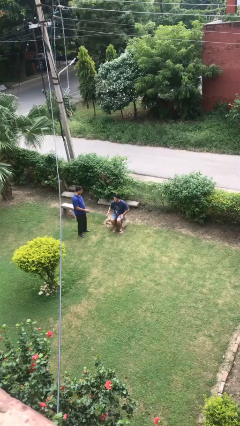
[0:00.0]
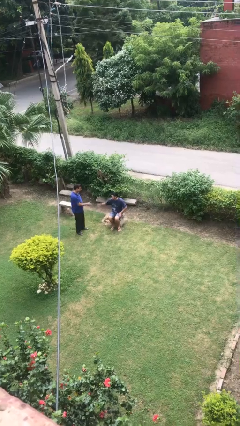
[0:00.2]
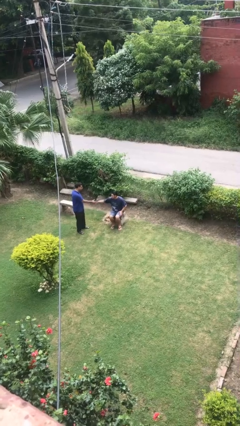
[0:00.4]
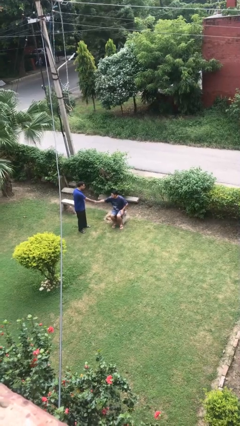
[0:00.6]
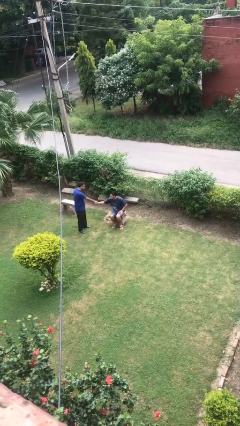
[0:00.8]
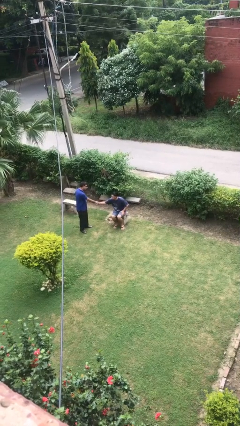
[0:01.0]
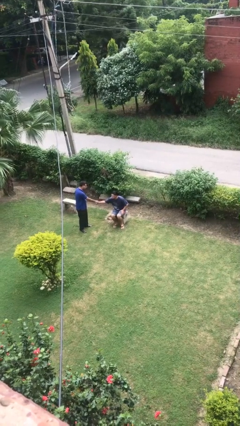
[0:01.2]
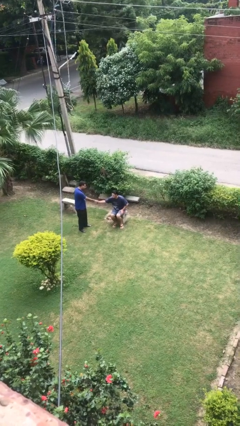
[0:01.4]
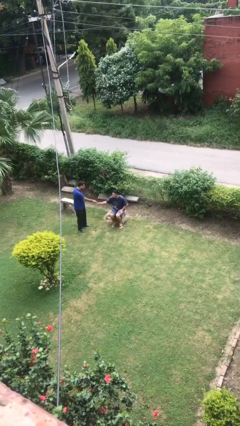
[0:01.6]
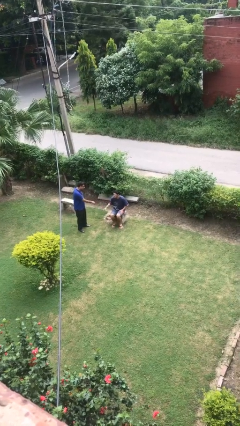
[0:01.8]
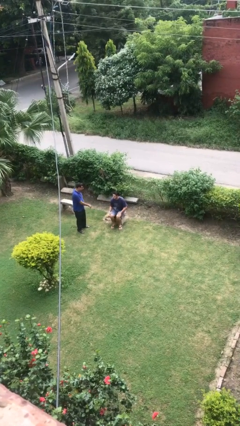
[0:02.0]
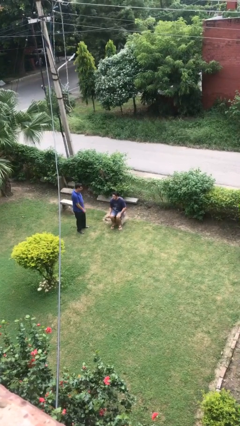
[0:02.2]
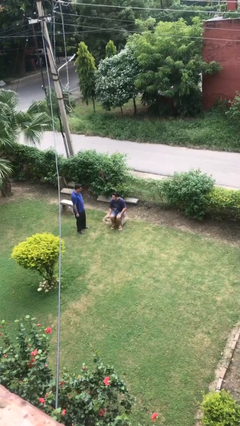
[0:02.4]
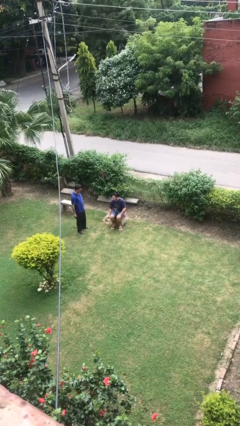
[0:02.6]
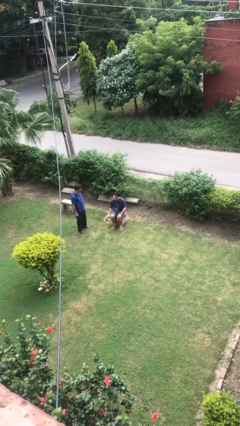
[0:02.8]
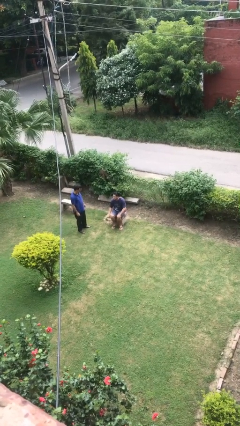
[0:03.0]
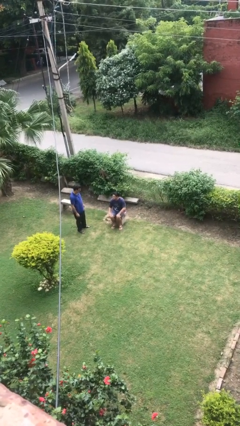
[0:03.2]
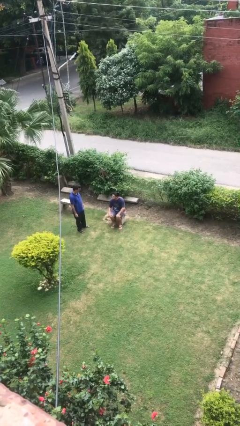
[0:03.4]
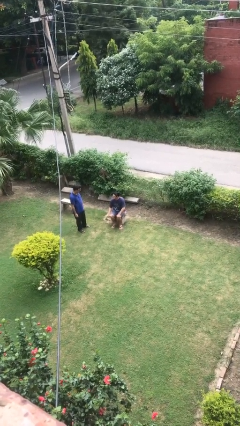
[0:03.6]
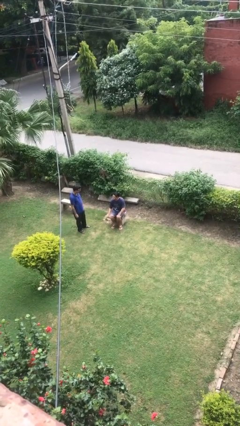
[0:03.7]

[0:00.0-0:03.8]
person shakes hand

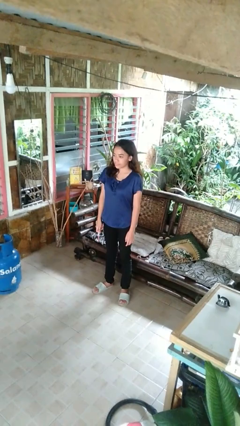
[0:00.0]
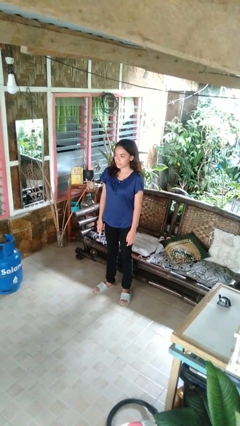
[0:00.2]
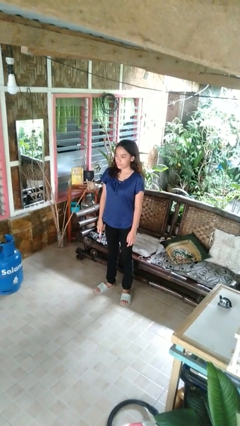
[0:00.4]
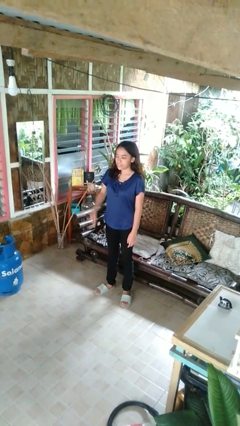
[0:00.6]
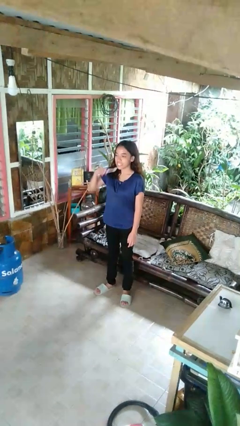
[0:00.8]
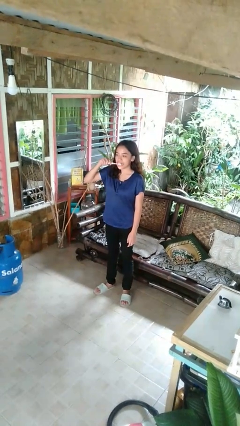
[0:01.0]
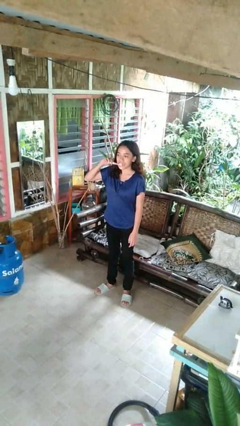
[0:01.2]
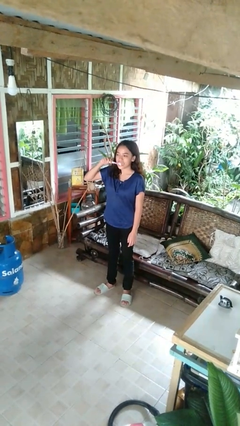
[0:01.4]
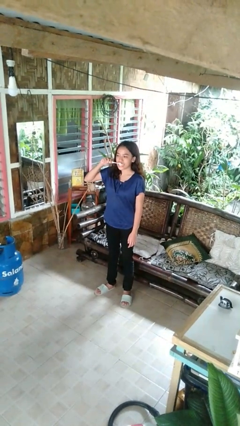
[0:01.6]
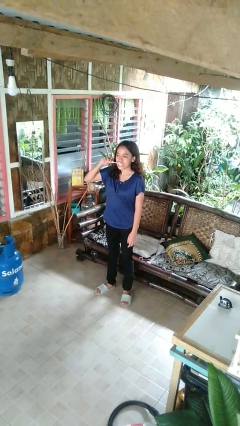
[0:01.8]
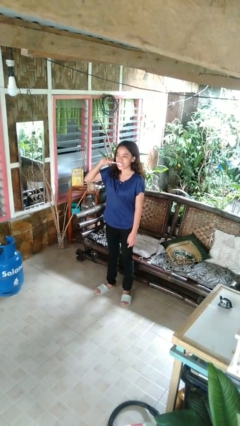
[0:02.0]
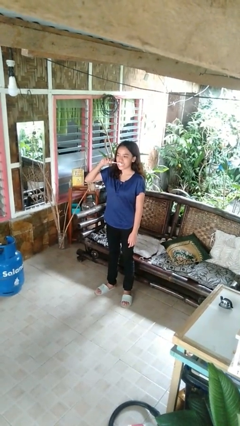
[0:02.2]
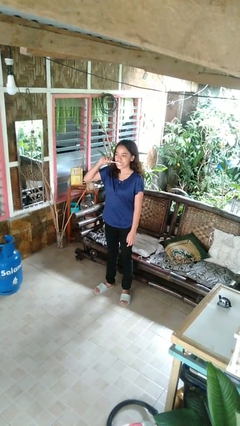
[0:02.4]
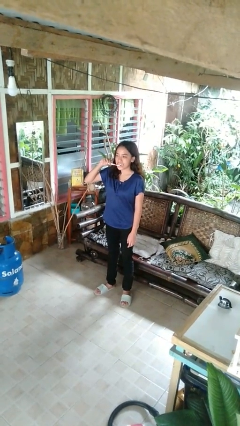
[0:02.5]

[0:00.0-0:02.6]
person brushes teeth

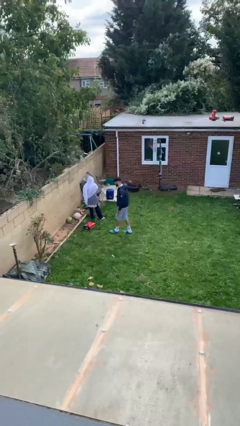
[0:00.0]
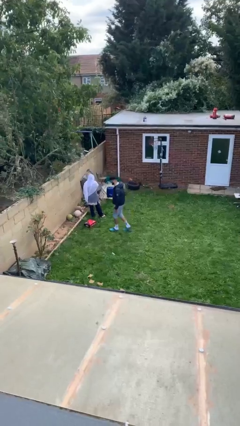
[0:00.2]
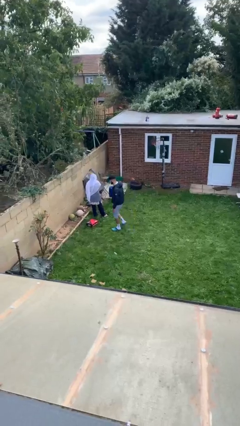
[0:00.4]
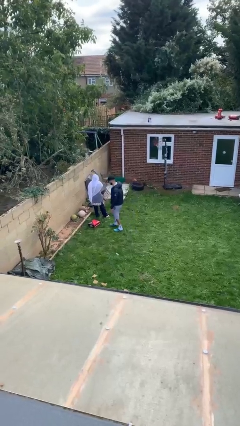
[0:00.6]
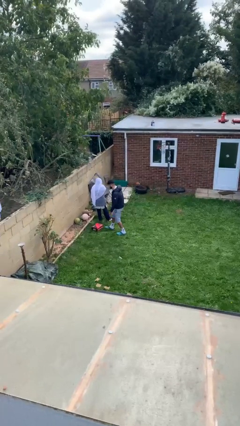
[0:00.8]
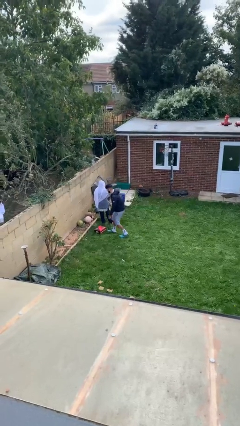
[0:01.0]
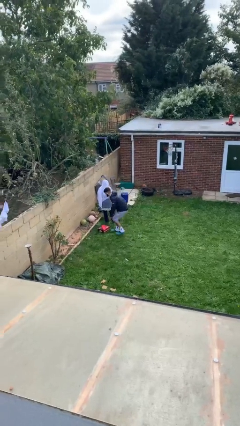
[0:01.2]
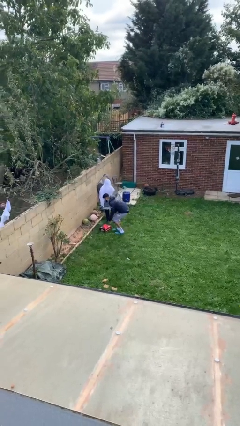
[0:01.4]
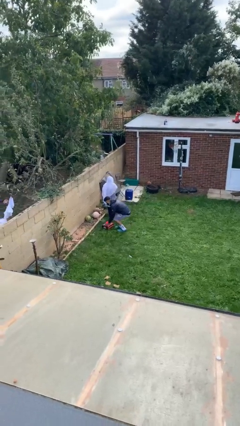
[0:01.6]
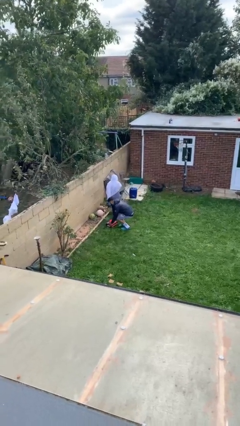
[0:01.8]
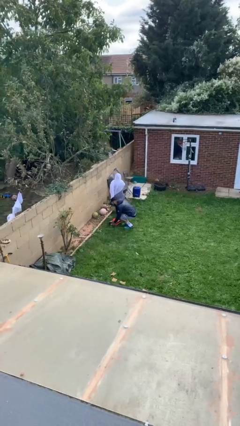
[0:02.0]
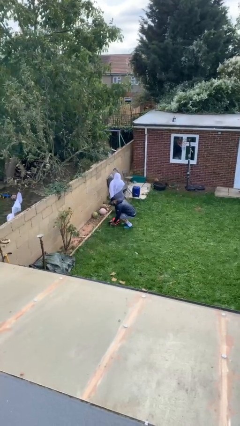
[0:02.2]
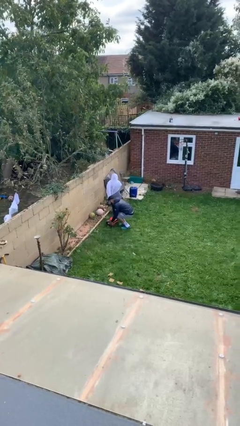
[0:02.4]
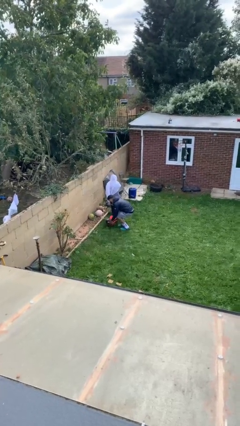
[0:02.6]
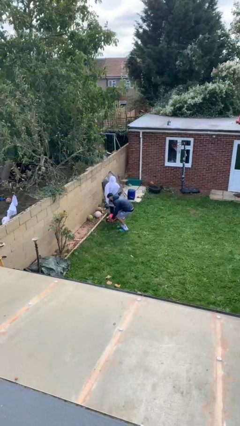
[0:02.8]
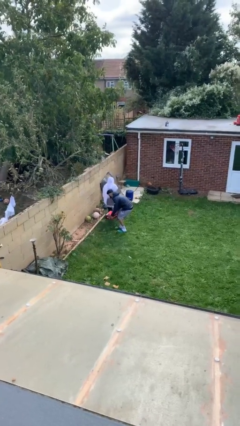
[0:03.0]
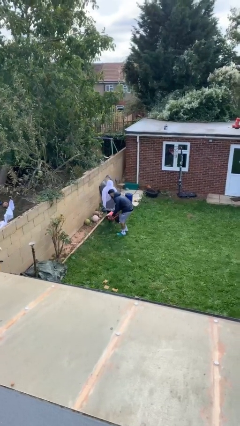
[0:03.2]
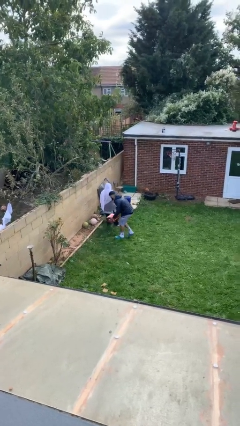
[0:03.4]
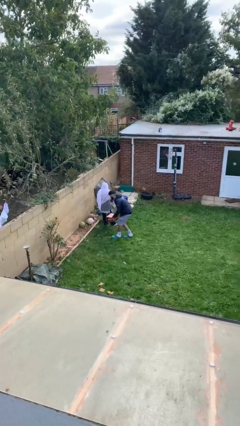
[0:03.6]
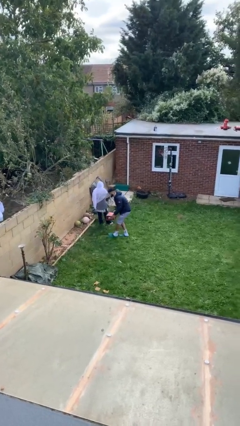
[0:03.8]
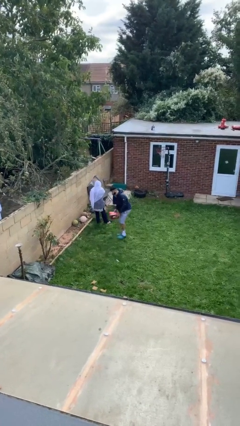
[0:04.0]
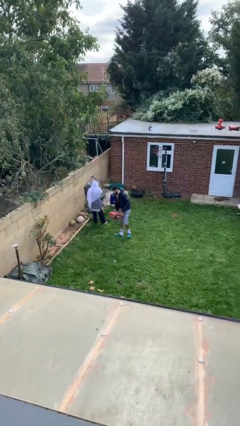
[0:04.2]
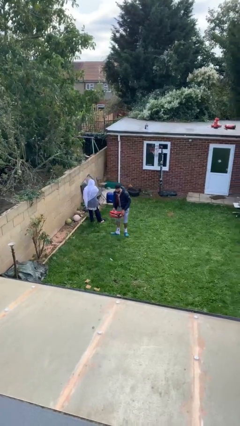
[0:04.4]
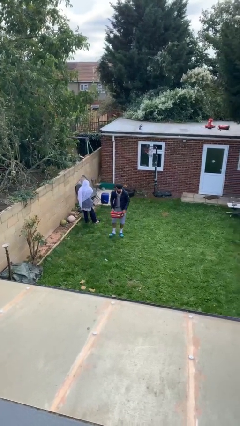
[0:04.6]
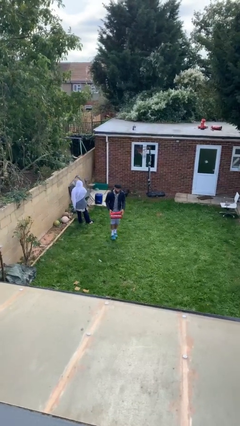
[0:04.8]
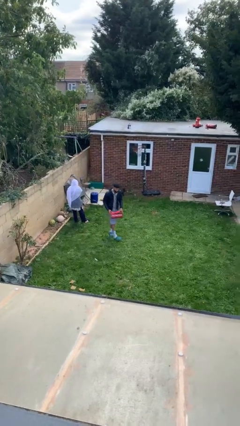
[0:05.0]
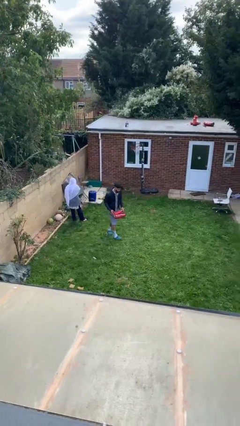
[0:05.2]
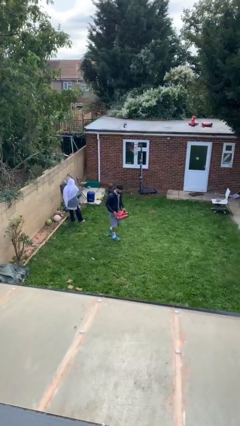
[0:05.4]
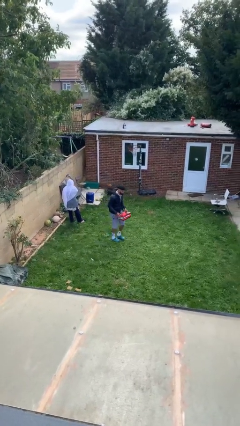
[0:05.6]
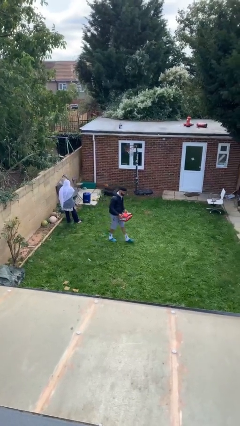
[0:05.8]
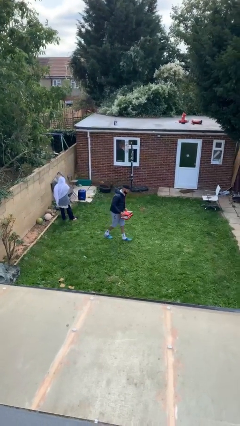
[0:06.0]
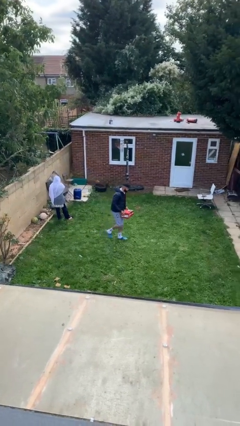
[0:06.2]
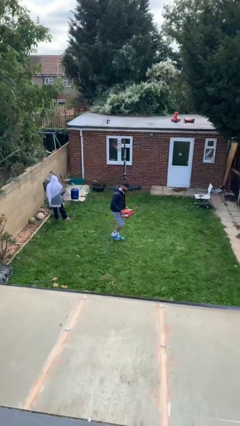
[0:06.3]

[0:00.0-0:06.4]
person steals object from person

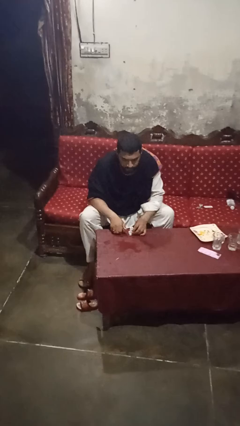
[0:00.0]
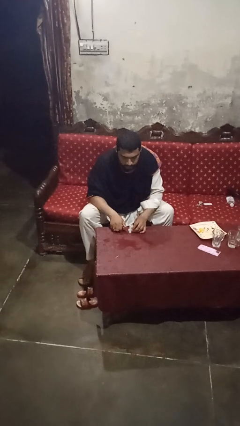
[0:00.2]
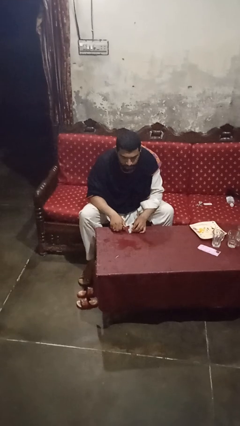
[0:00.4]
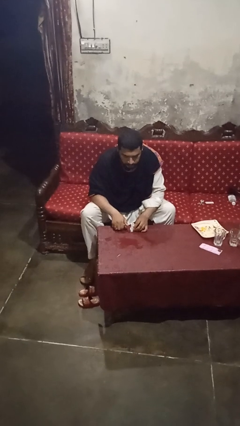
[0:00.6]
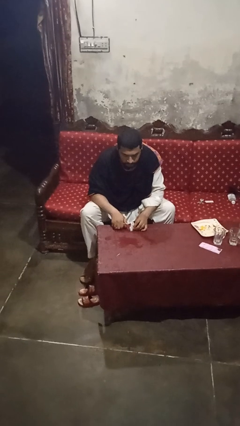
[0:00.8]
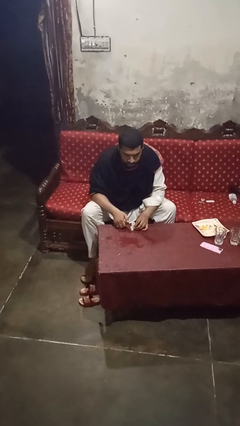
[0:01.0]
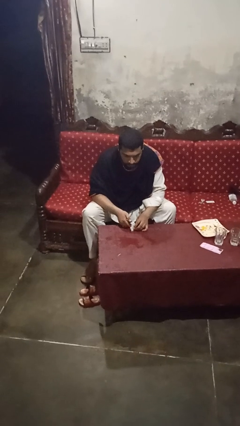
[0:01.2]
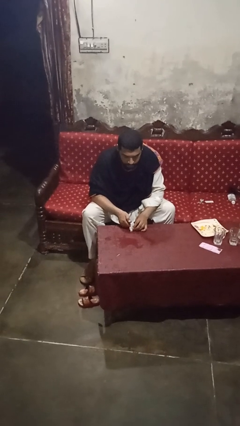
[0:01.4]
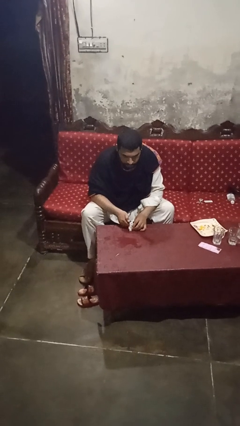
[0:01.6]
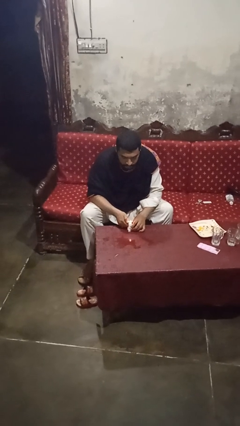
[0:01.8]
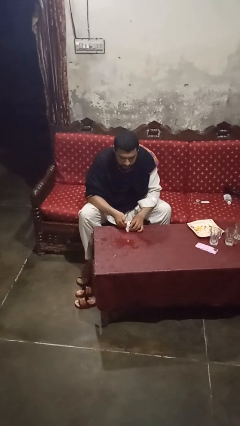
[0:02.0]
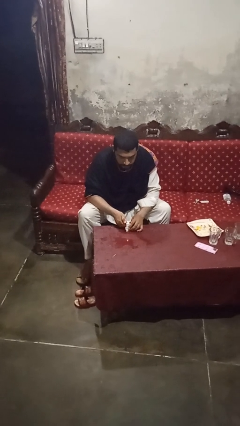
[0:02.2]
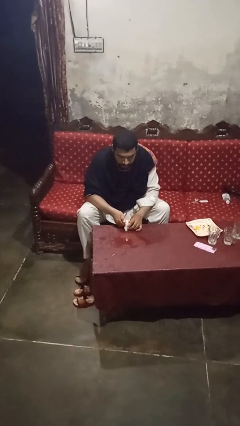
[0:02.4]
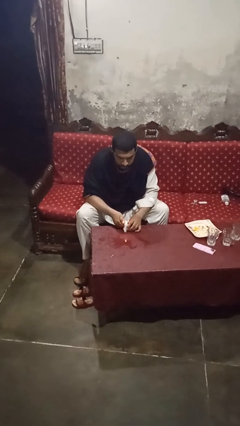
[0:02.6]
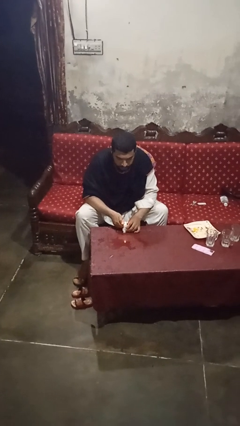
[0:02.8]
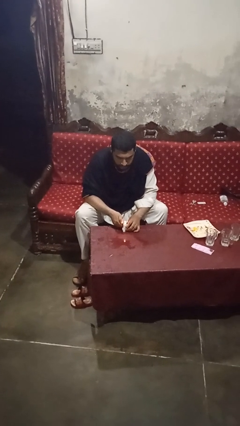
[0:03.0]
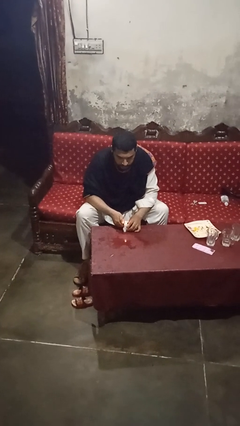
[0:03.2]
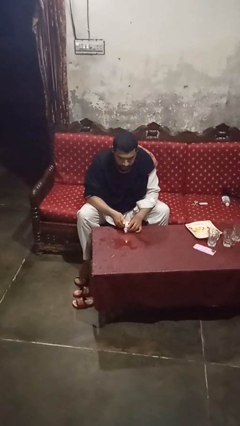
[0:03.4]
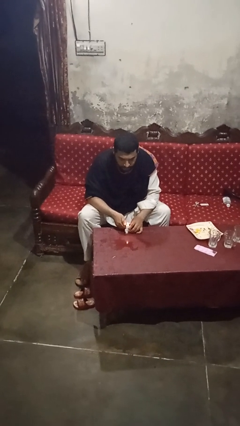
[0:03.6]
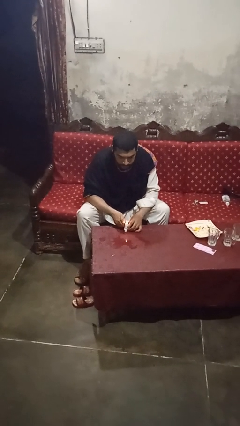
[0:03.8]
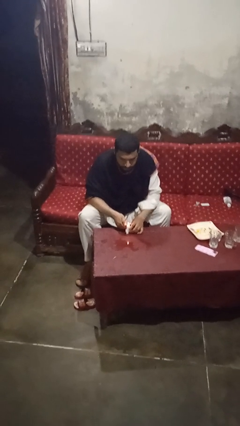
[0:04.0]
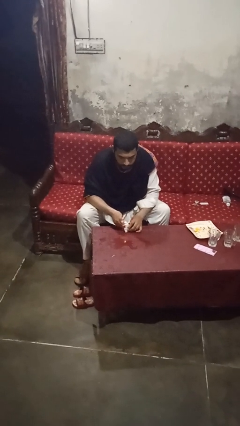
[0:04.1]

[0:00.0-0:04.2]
person lights candle

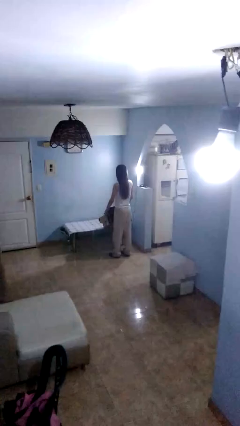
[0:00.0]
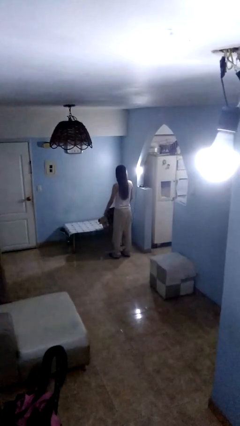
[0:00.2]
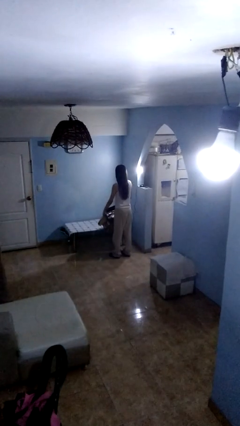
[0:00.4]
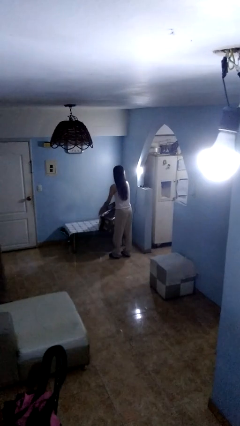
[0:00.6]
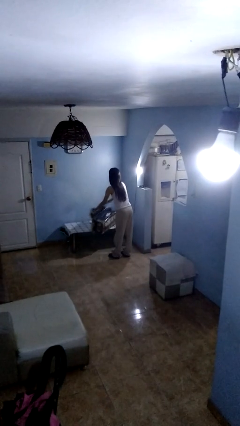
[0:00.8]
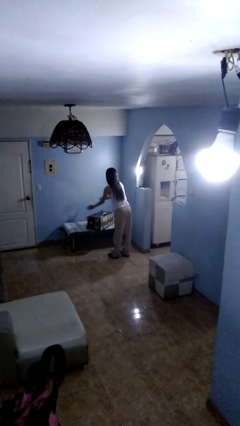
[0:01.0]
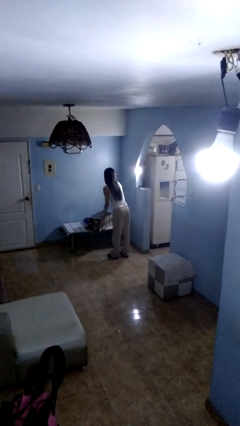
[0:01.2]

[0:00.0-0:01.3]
person unloads box onto table
